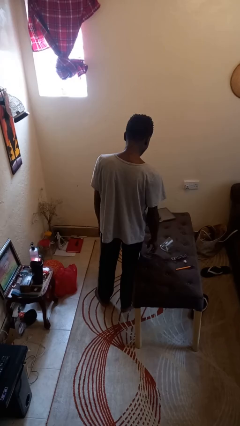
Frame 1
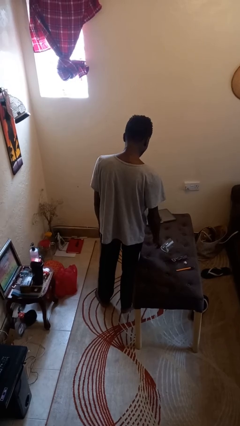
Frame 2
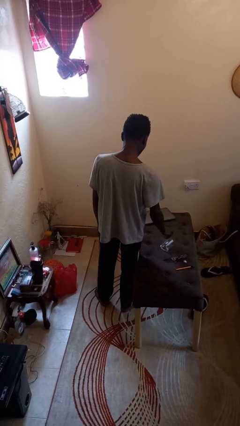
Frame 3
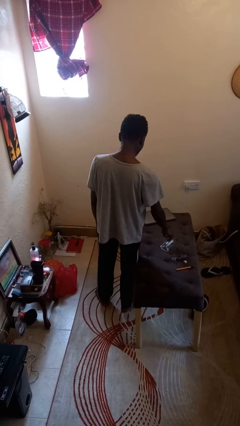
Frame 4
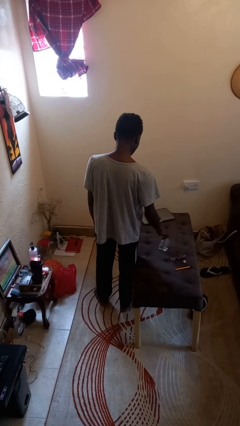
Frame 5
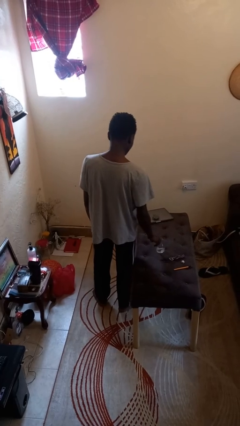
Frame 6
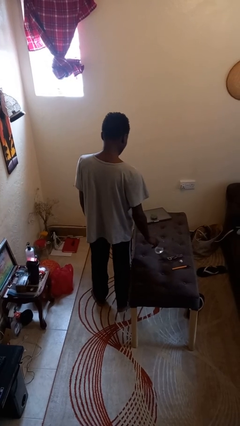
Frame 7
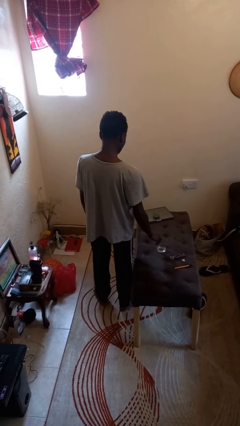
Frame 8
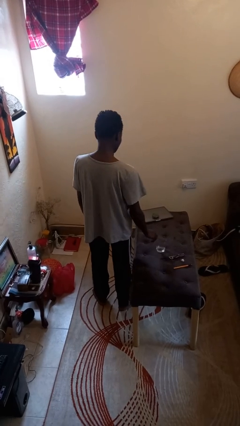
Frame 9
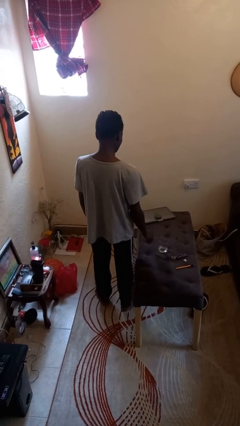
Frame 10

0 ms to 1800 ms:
person sets upright glass

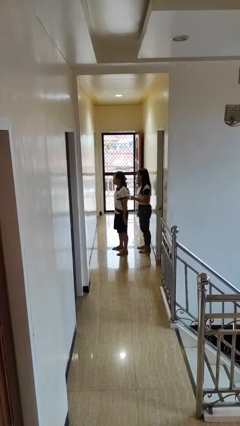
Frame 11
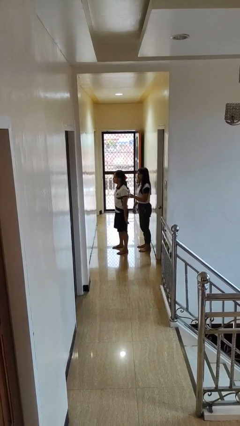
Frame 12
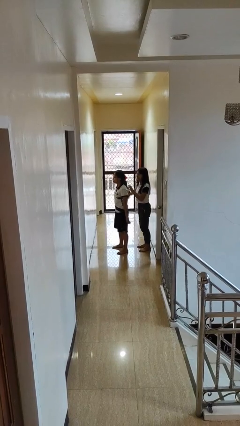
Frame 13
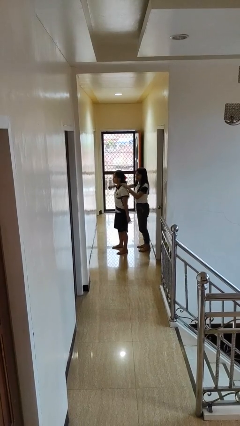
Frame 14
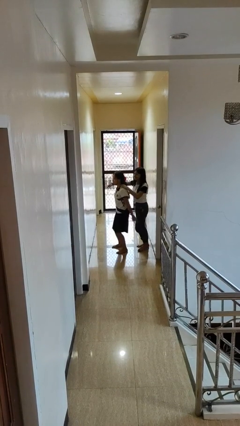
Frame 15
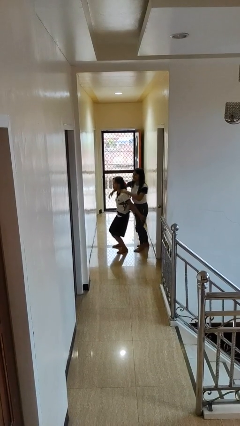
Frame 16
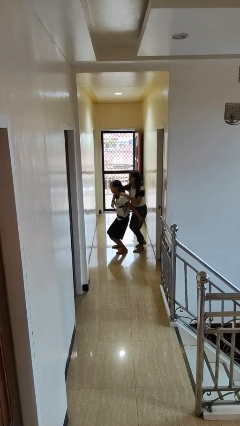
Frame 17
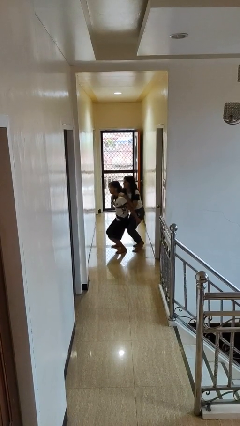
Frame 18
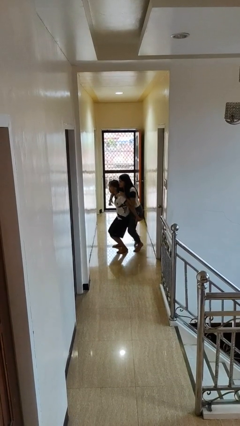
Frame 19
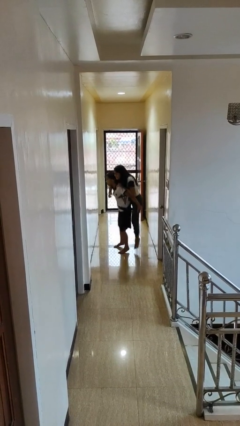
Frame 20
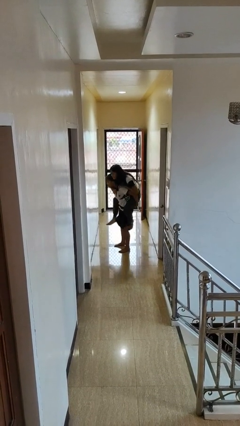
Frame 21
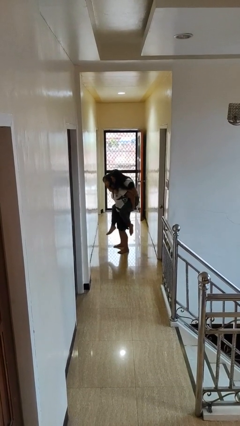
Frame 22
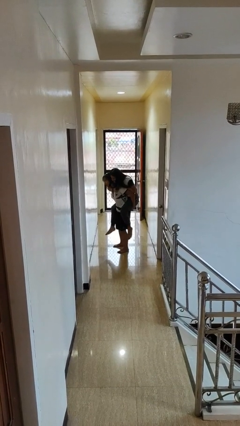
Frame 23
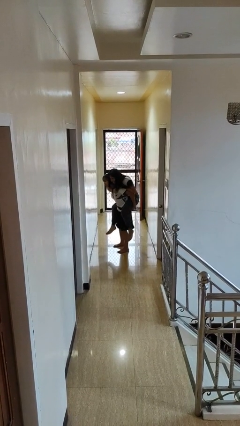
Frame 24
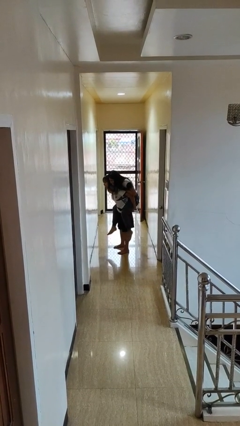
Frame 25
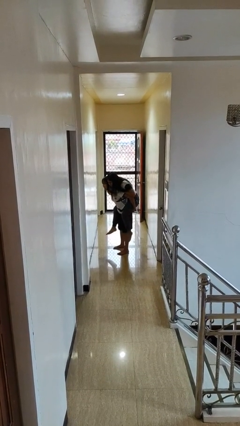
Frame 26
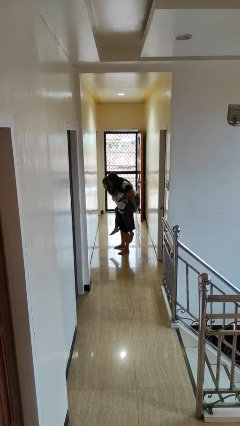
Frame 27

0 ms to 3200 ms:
person carries person over shoulder

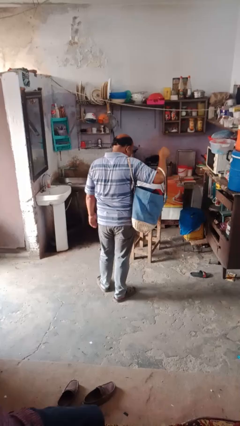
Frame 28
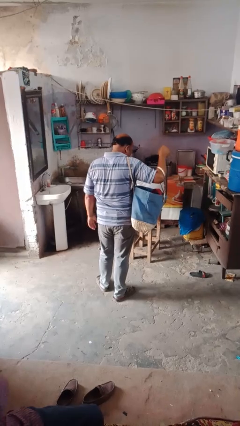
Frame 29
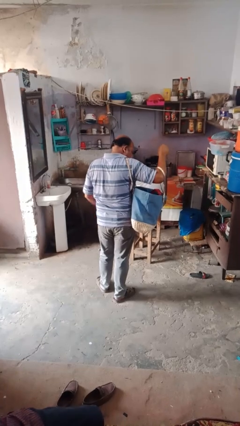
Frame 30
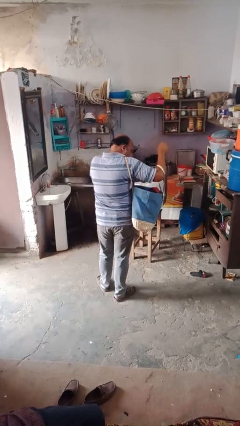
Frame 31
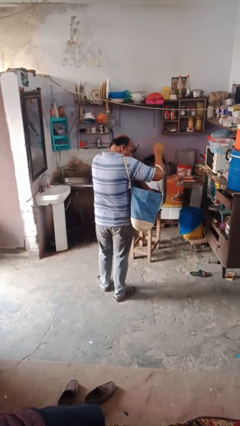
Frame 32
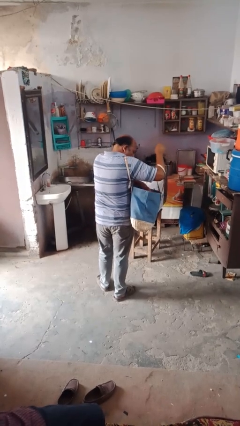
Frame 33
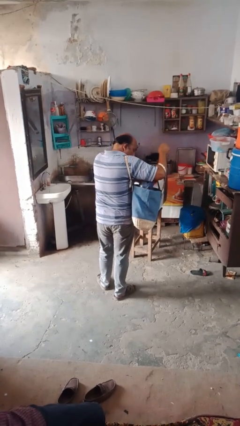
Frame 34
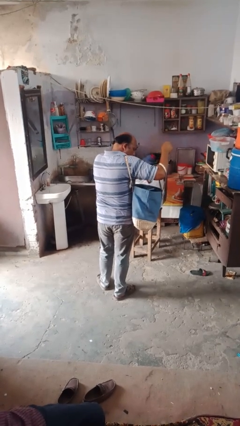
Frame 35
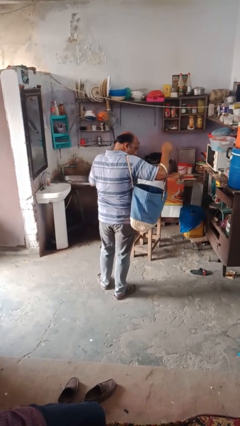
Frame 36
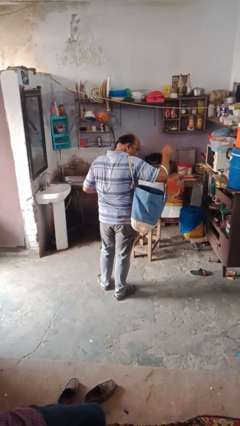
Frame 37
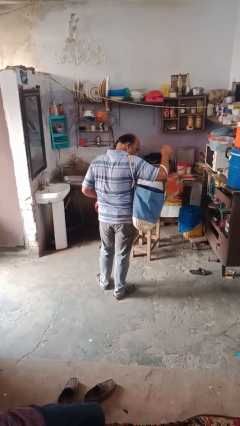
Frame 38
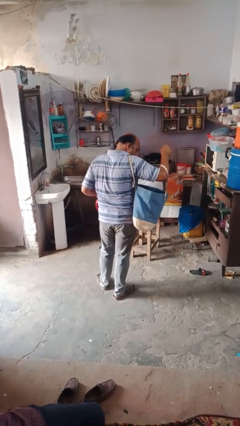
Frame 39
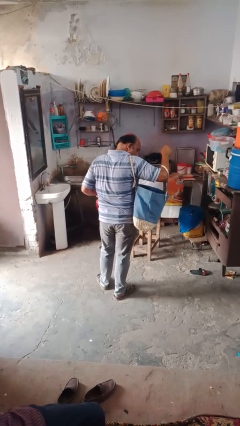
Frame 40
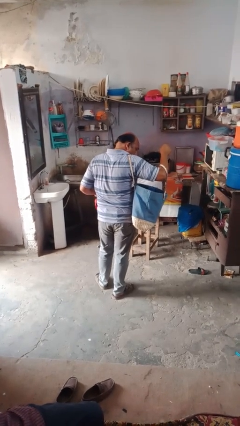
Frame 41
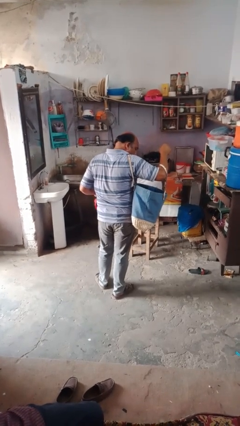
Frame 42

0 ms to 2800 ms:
person takes object from bag

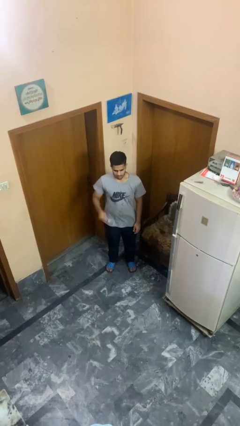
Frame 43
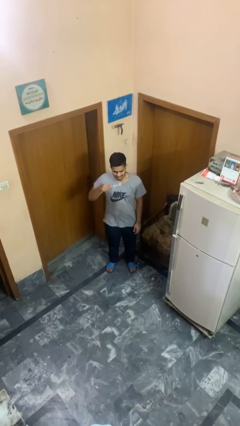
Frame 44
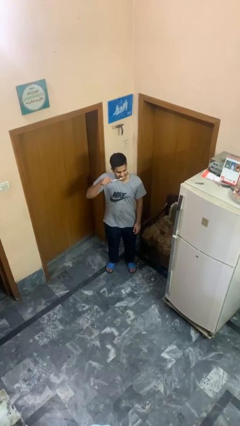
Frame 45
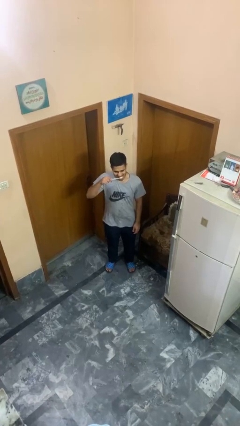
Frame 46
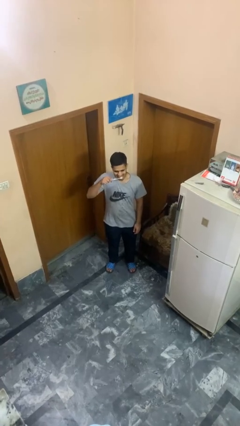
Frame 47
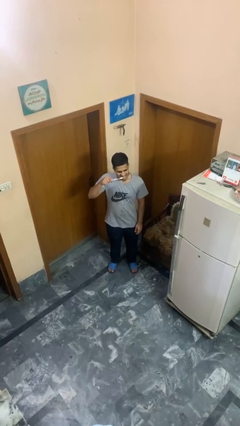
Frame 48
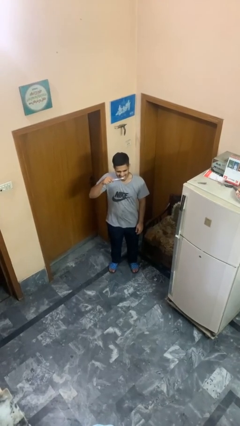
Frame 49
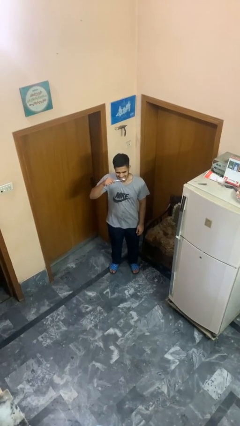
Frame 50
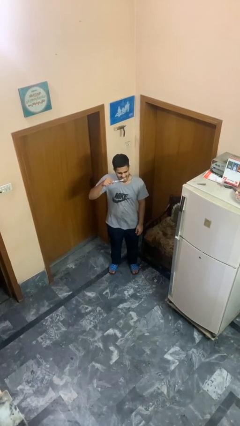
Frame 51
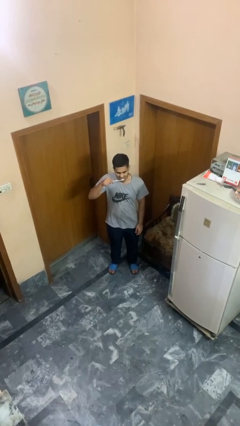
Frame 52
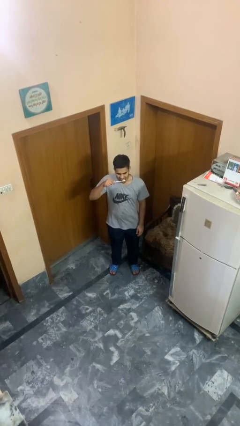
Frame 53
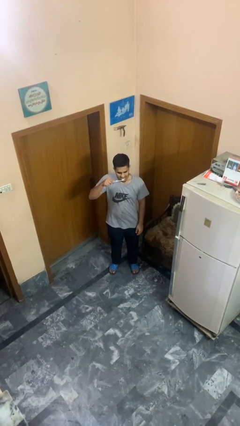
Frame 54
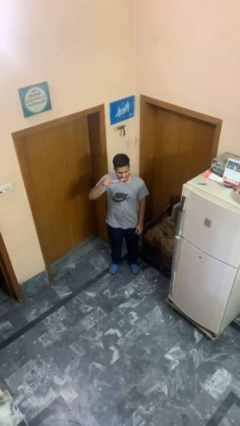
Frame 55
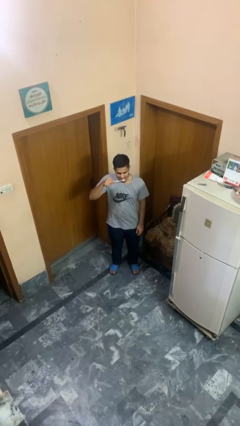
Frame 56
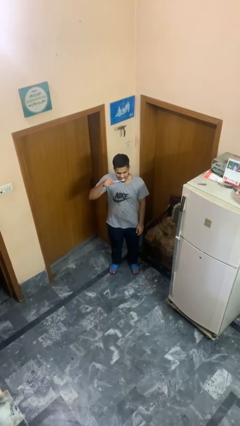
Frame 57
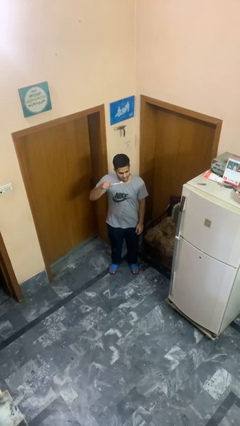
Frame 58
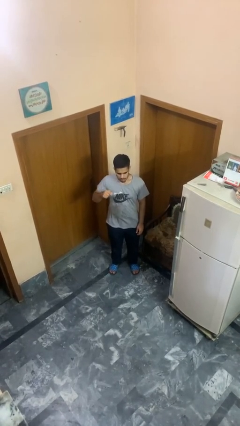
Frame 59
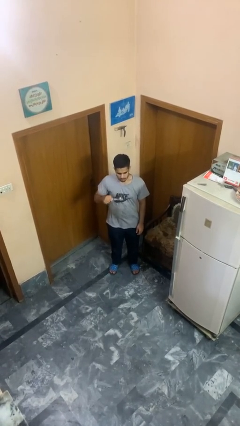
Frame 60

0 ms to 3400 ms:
person brushes teeth

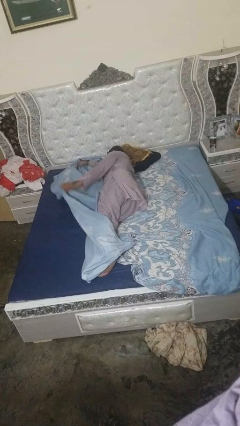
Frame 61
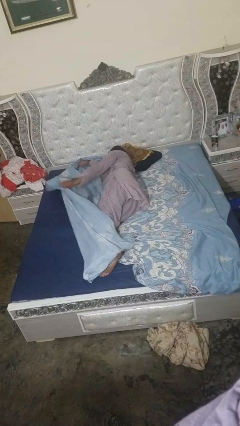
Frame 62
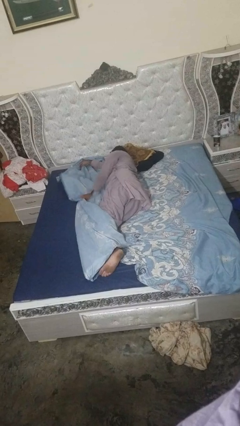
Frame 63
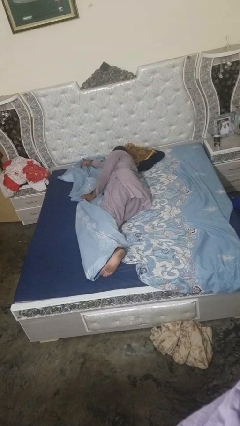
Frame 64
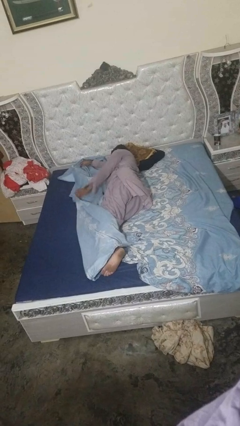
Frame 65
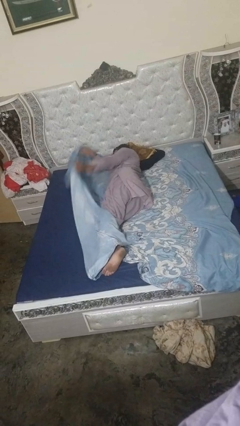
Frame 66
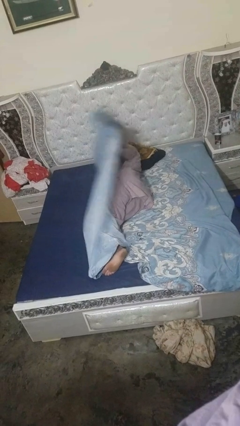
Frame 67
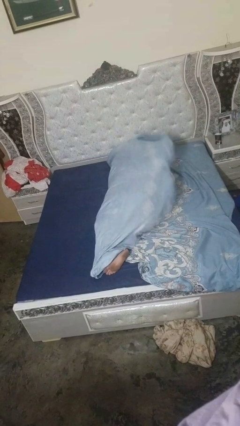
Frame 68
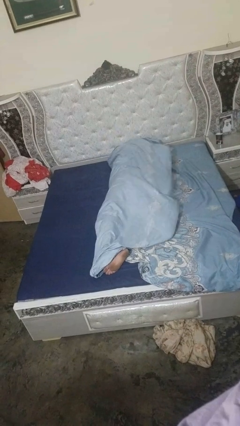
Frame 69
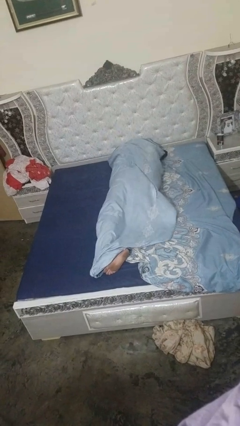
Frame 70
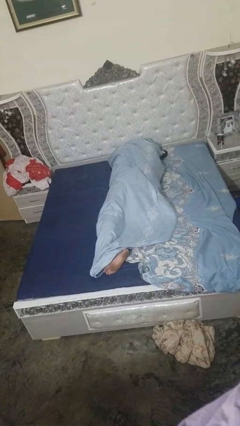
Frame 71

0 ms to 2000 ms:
person covers with bedsheets

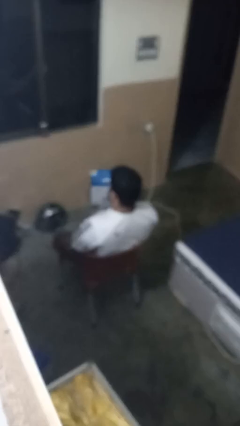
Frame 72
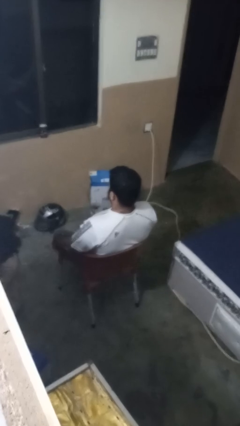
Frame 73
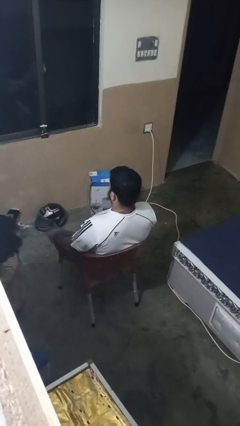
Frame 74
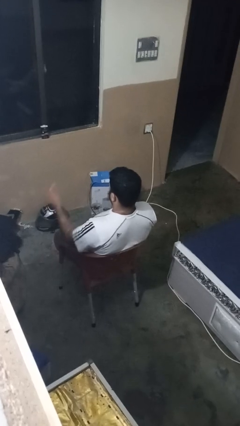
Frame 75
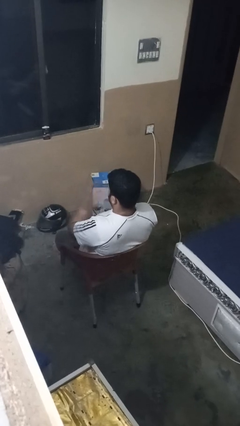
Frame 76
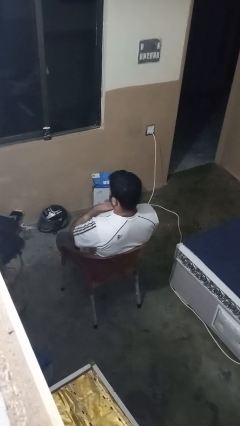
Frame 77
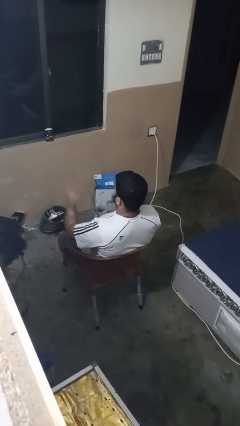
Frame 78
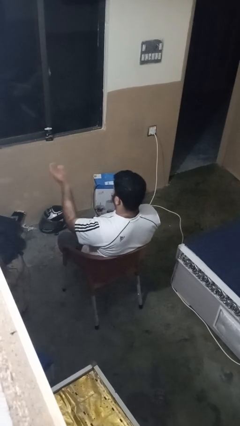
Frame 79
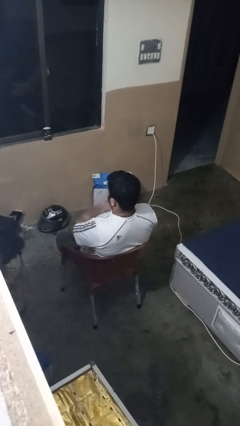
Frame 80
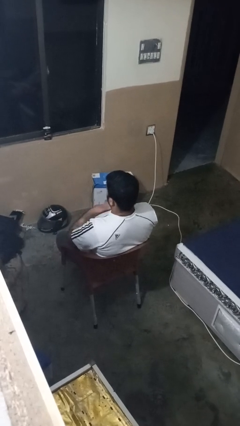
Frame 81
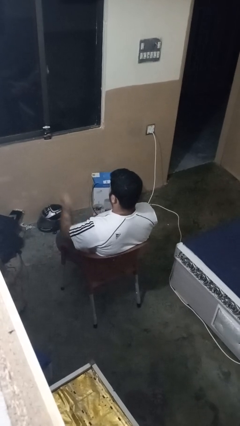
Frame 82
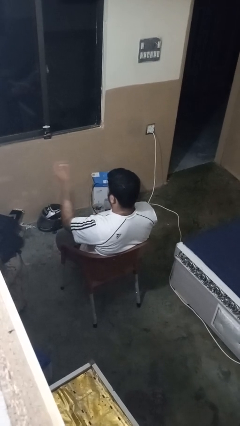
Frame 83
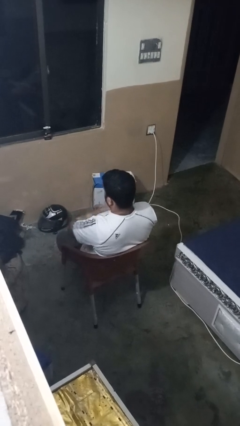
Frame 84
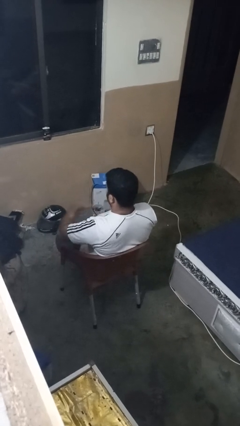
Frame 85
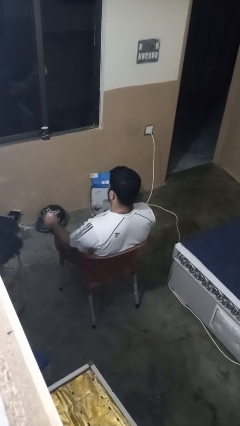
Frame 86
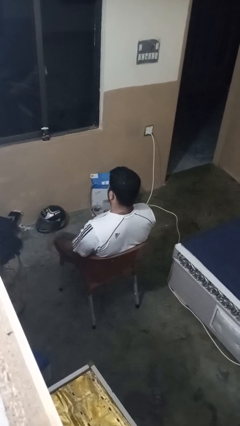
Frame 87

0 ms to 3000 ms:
person drums on chest

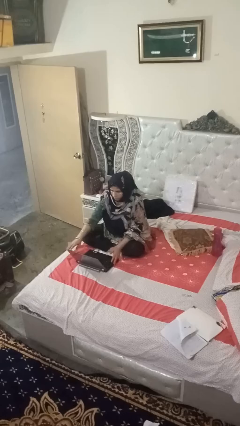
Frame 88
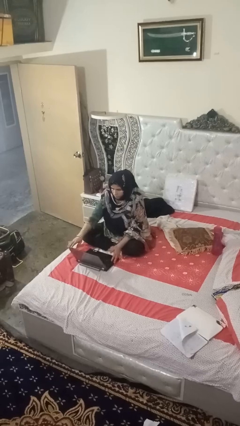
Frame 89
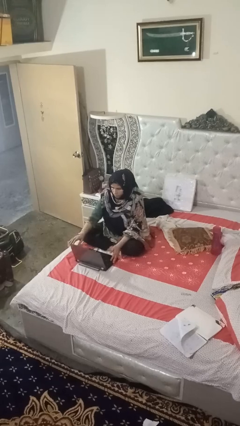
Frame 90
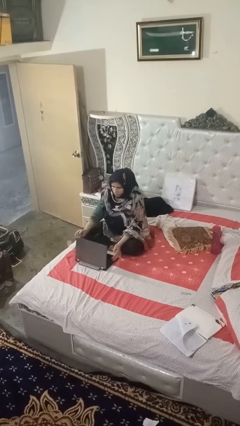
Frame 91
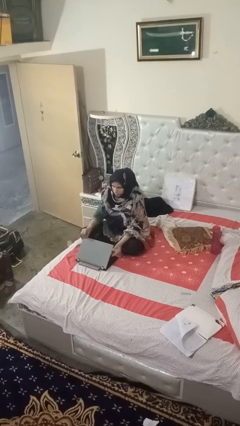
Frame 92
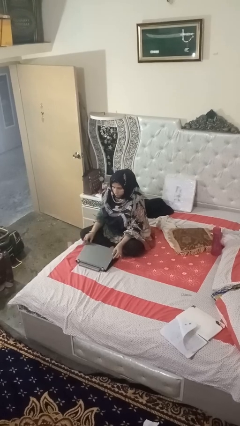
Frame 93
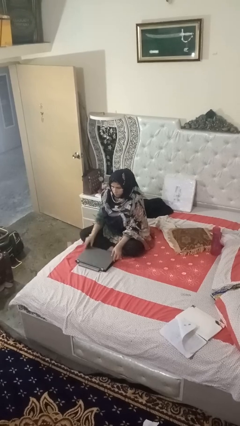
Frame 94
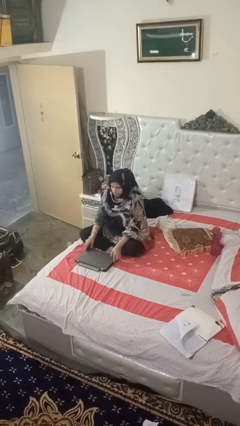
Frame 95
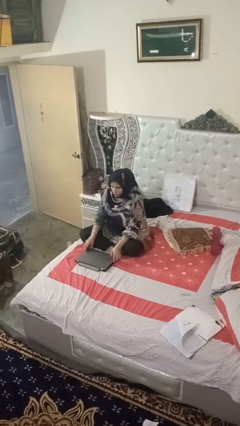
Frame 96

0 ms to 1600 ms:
person closes laptop
